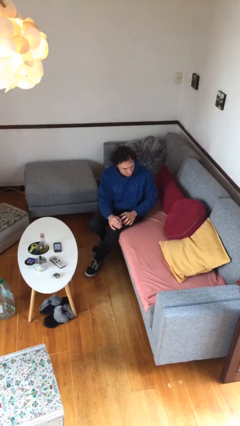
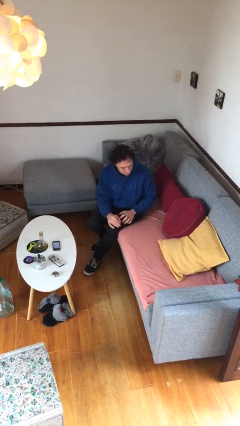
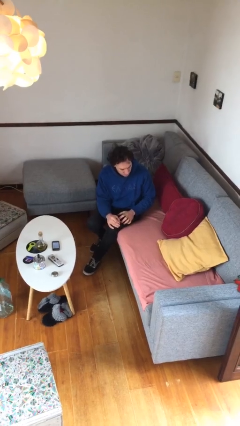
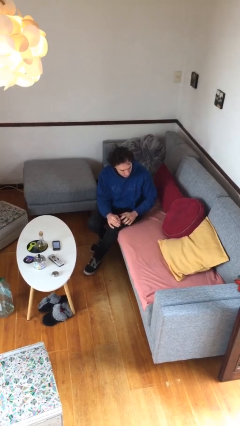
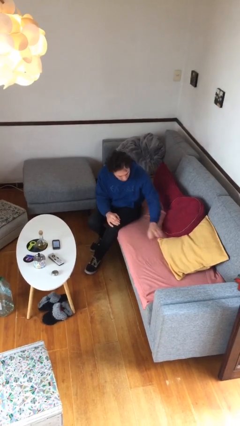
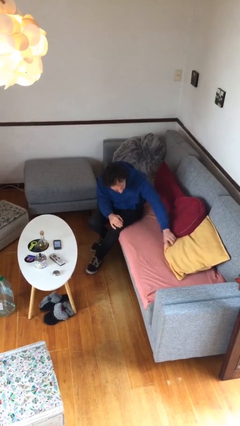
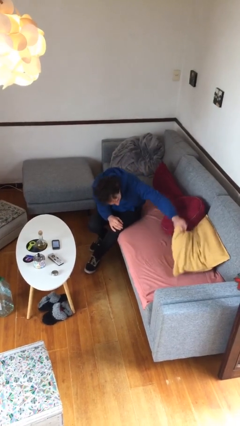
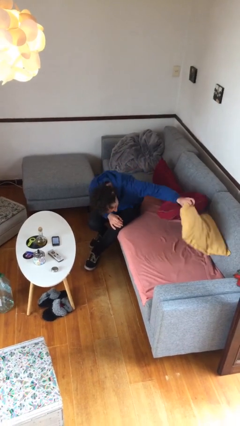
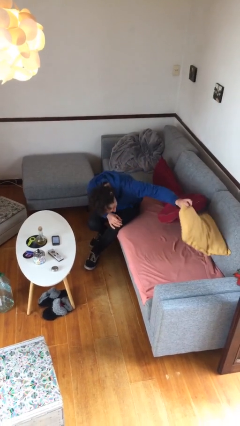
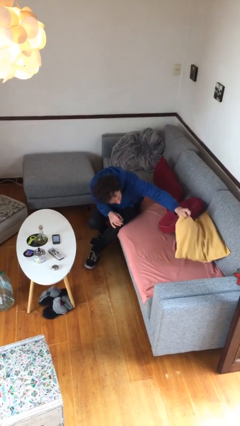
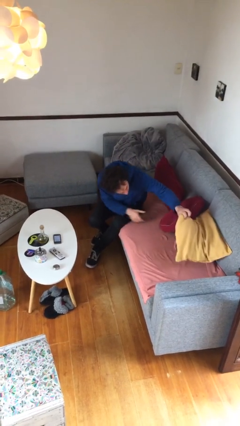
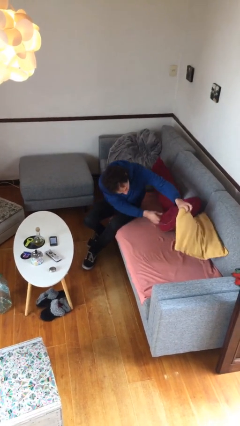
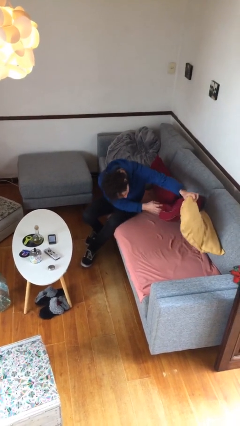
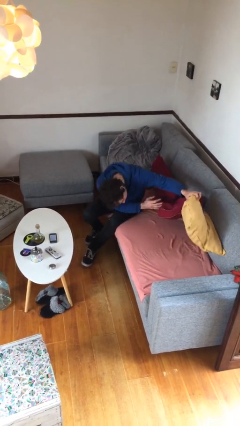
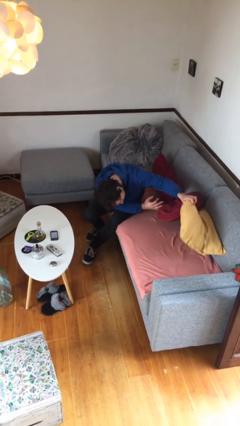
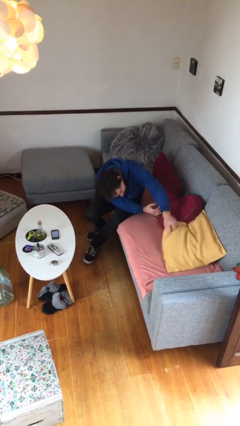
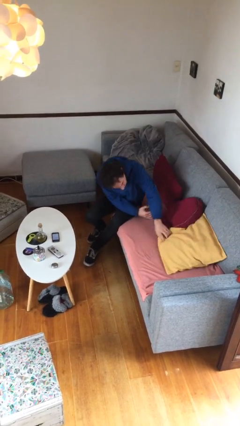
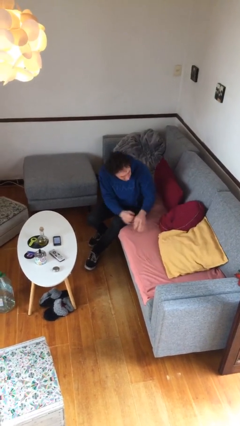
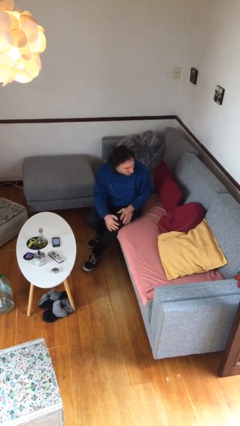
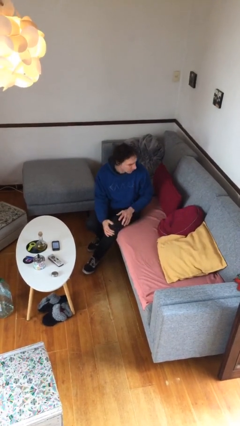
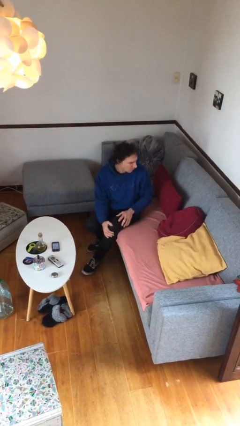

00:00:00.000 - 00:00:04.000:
person searches in couch

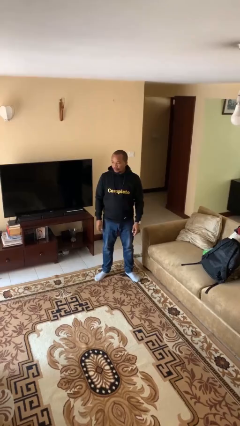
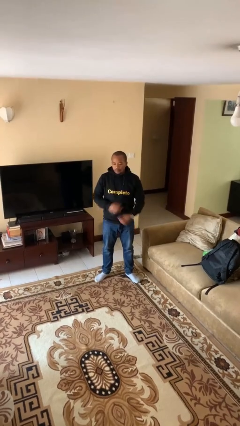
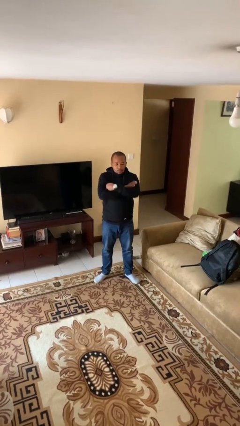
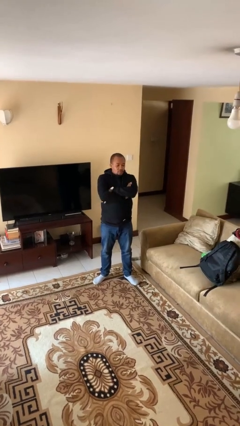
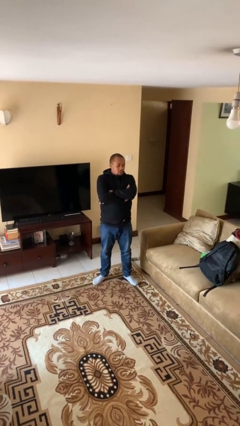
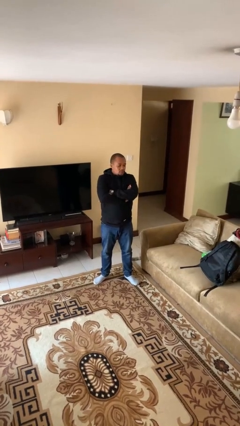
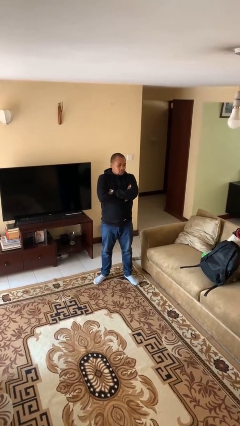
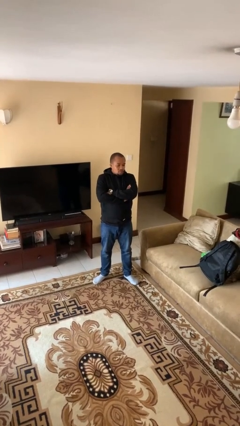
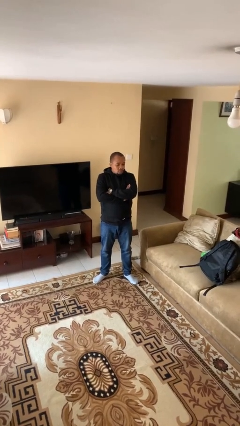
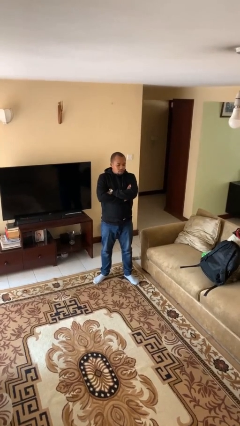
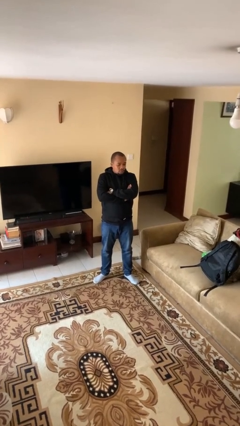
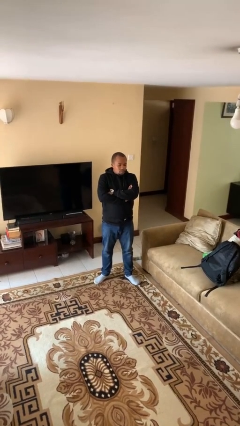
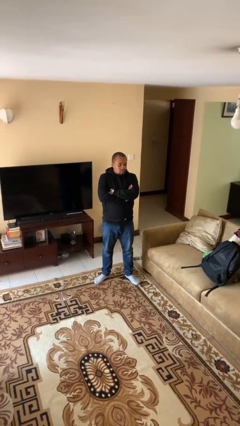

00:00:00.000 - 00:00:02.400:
person crosses arms

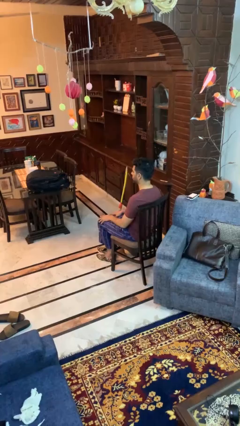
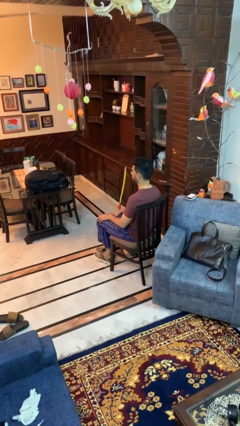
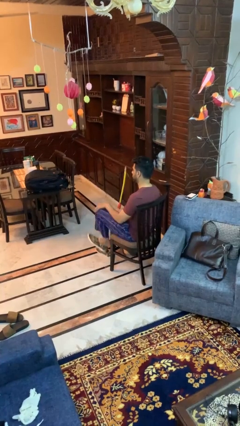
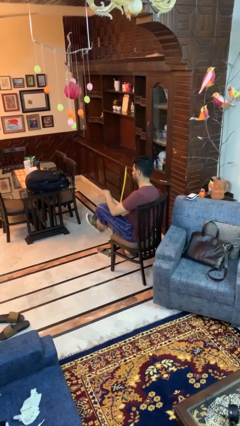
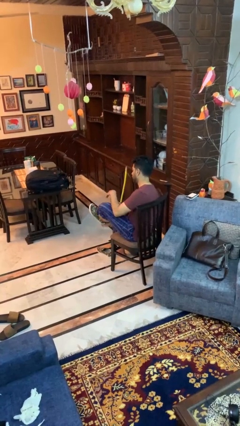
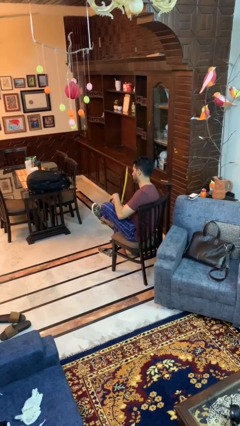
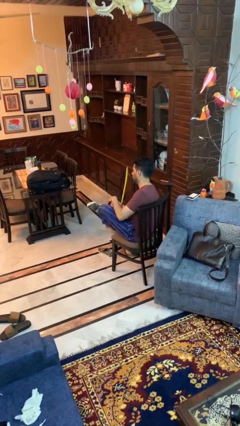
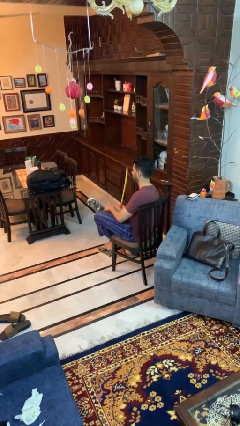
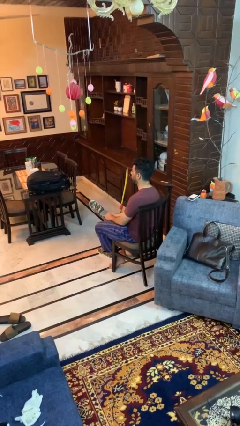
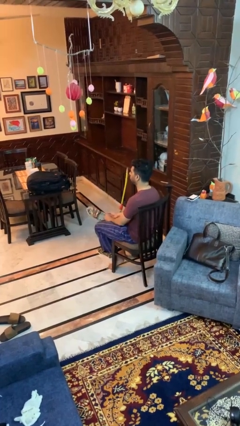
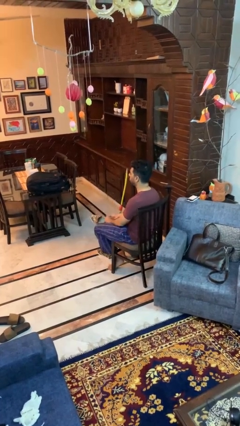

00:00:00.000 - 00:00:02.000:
person takes off shoes

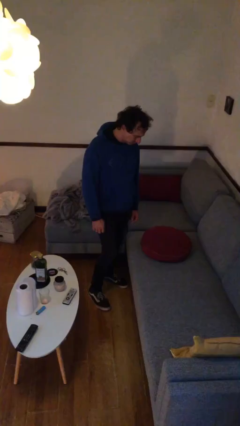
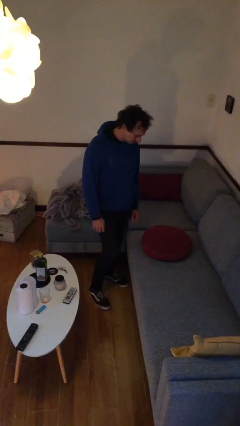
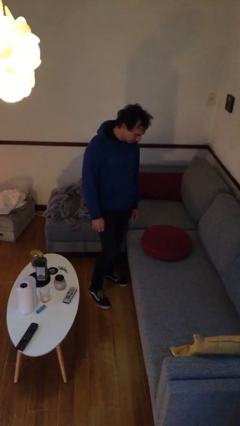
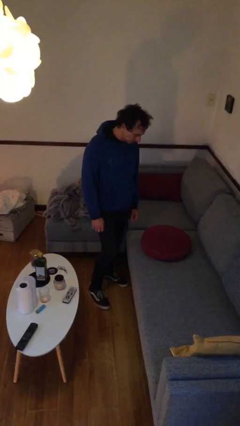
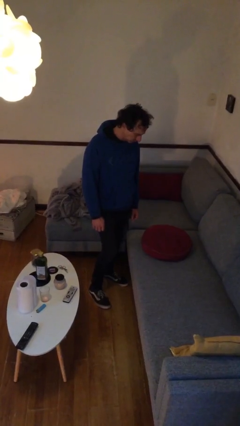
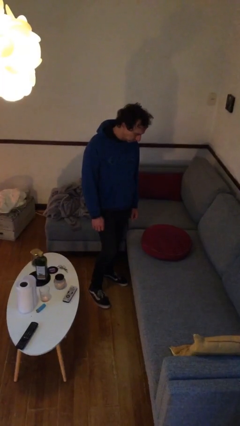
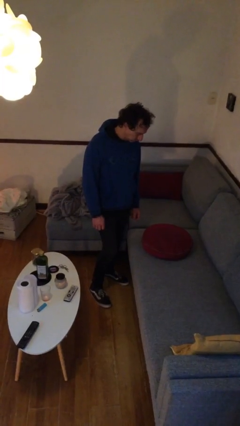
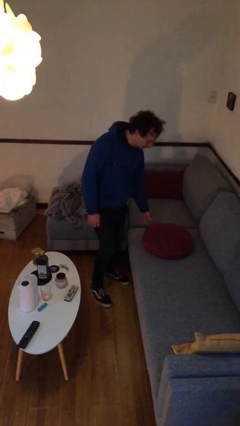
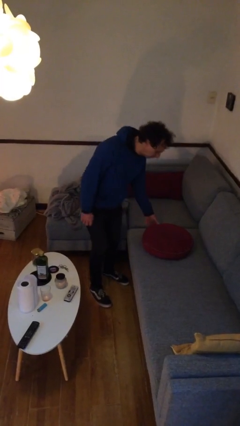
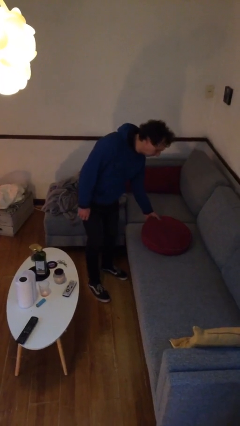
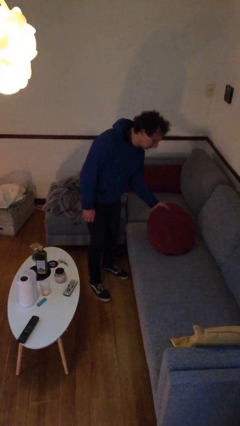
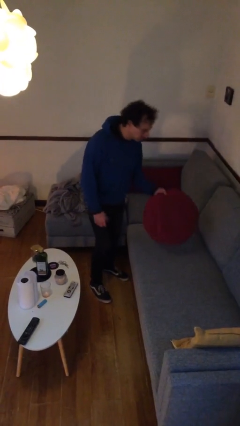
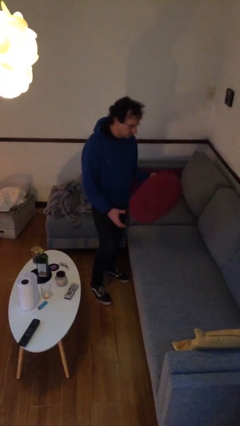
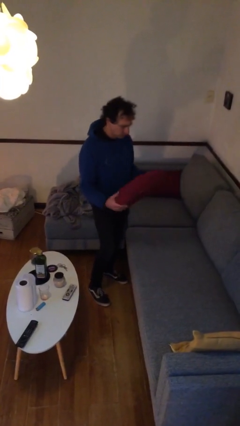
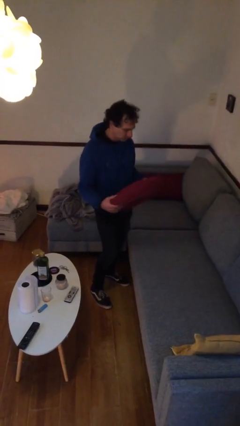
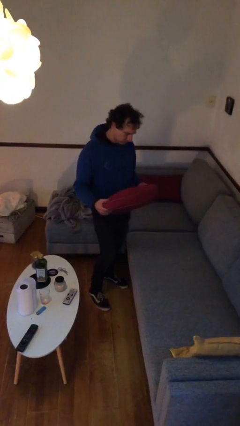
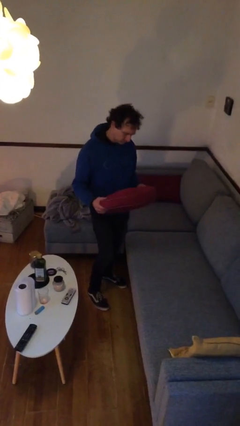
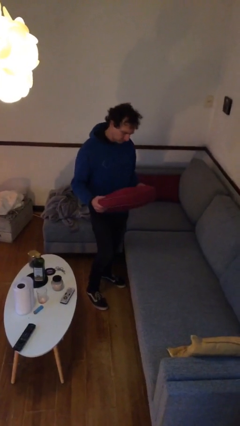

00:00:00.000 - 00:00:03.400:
person picks up object from couch

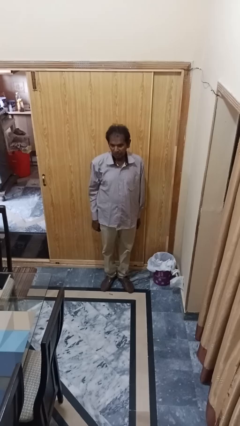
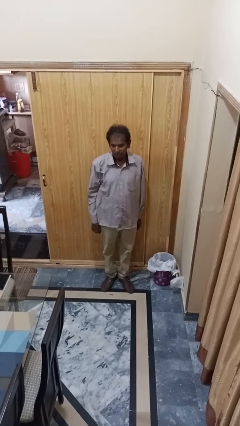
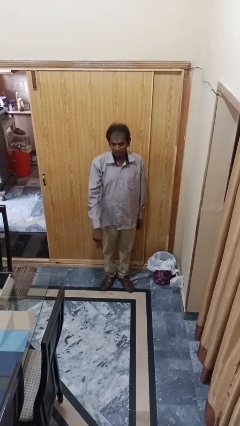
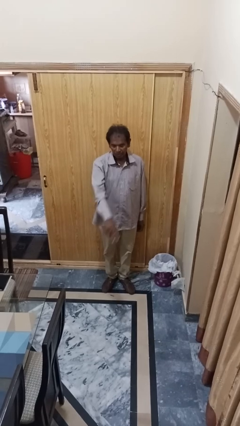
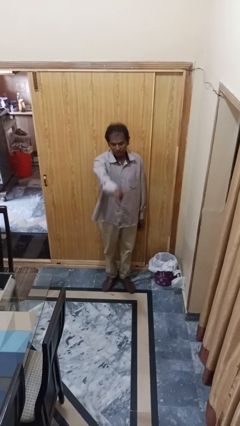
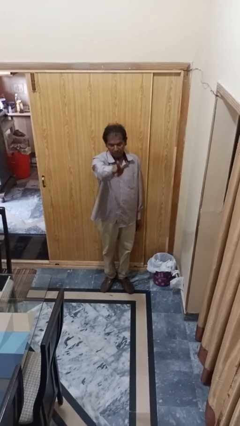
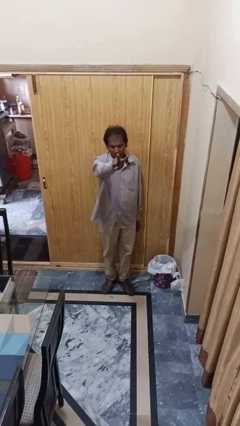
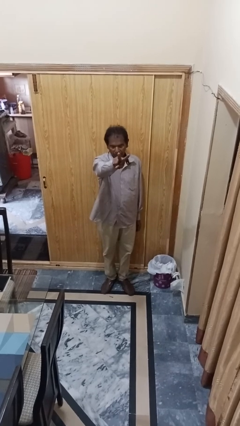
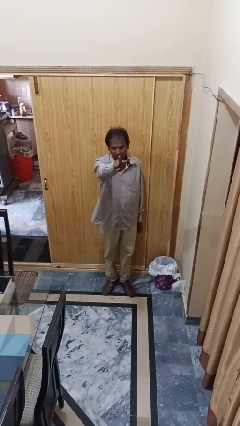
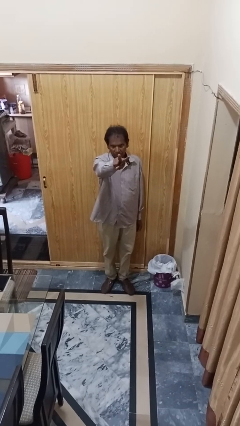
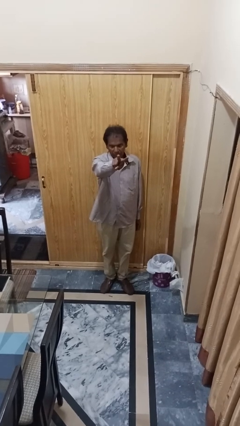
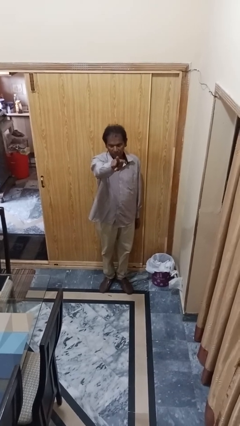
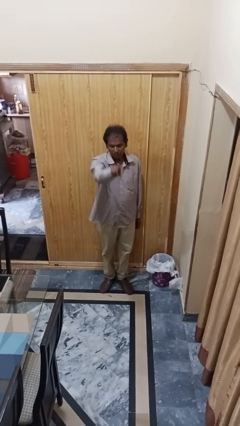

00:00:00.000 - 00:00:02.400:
person gestures peace

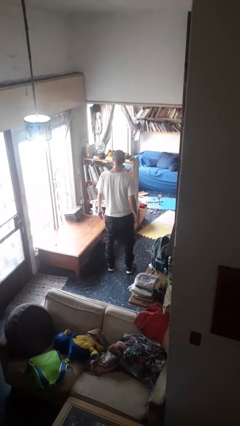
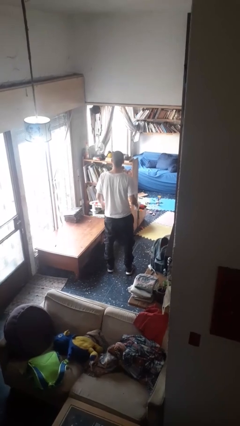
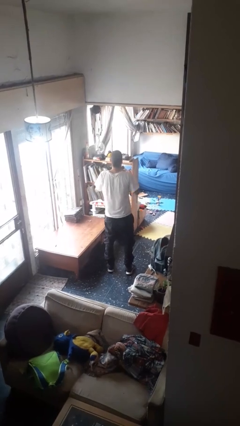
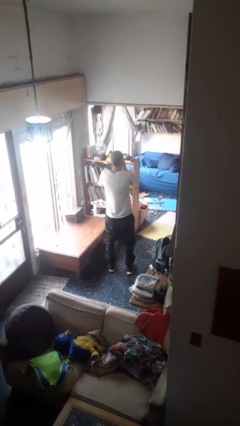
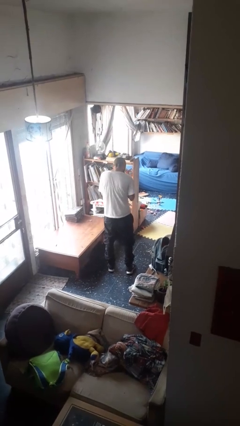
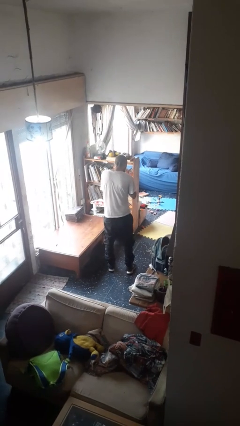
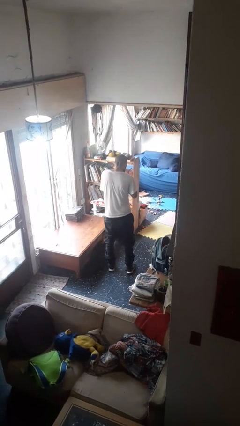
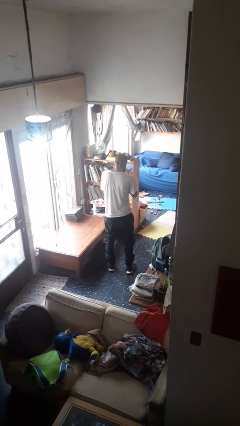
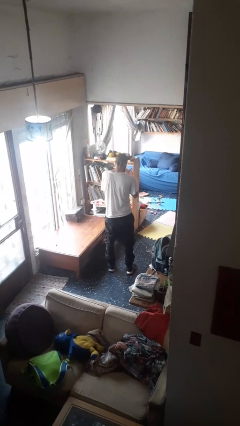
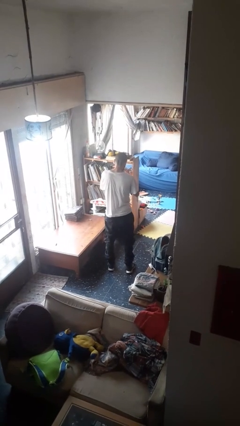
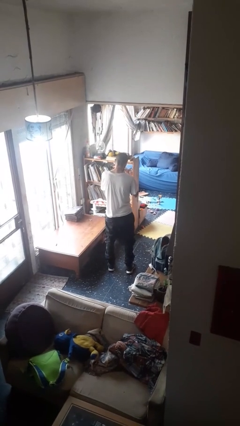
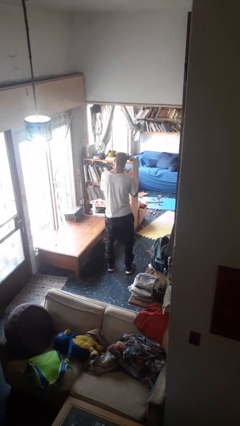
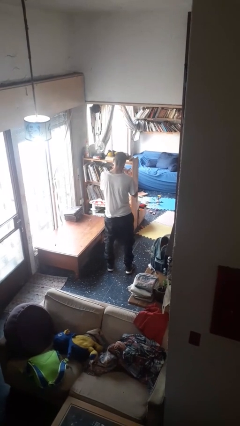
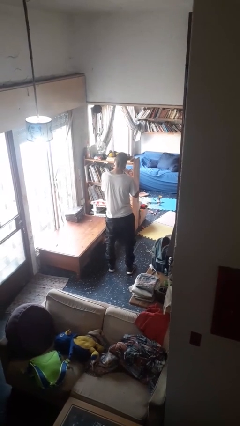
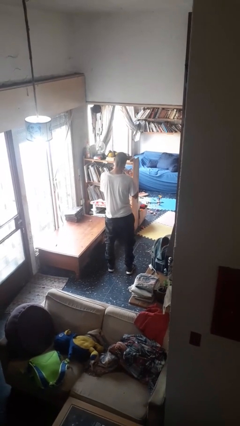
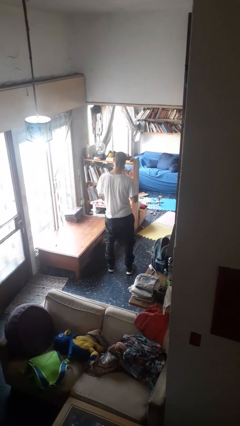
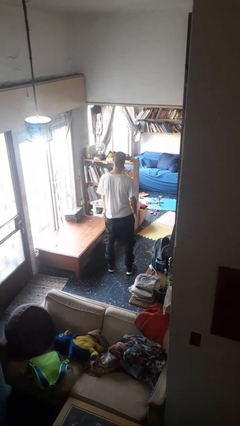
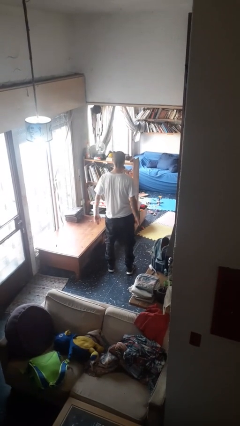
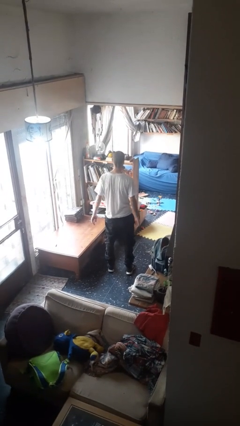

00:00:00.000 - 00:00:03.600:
person sneezes into hand
